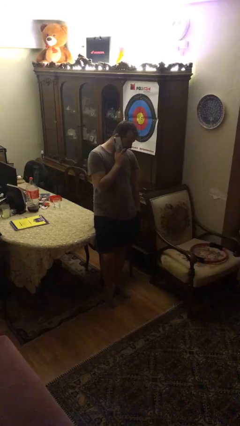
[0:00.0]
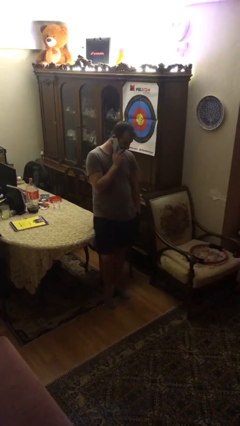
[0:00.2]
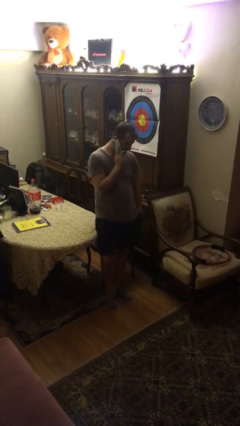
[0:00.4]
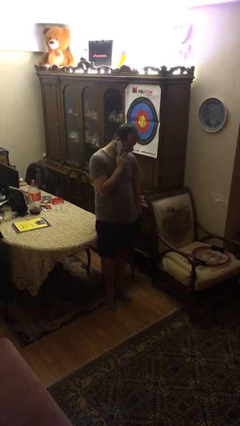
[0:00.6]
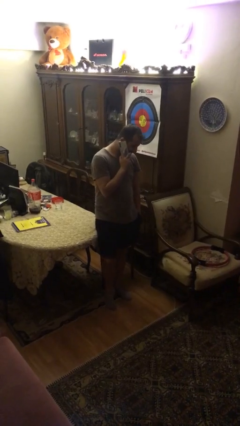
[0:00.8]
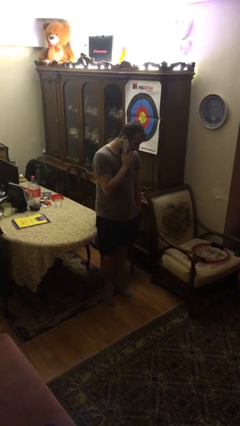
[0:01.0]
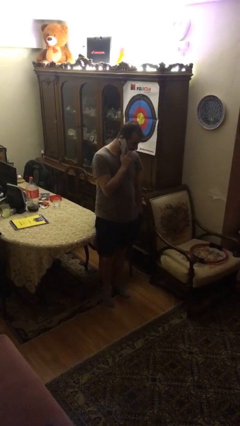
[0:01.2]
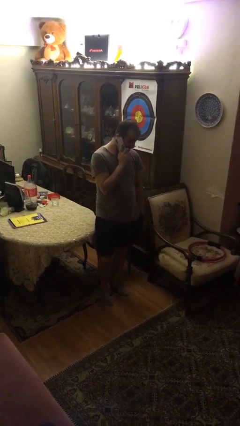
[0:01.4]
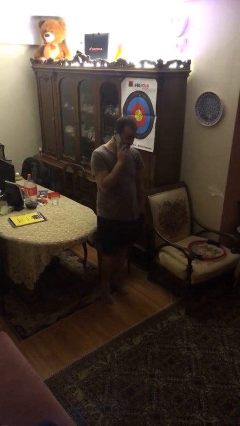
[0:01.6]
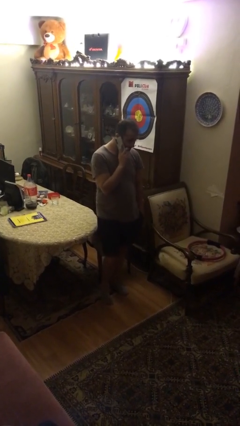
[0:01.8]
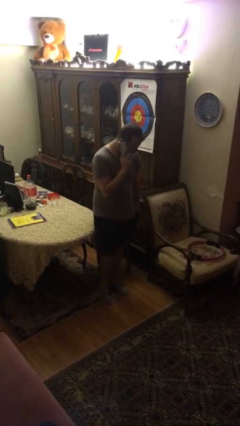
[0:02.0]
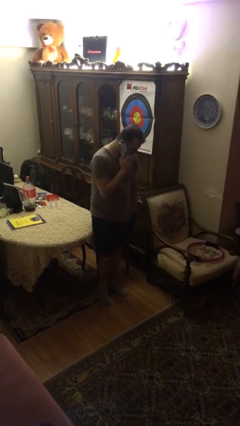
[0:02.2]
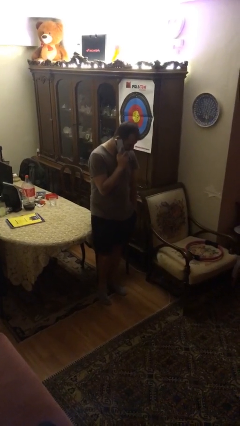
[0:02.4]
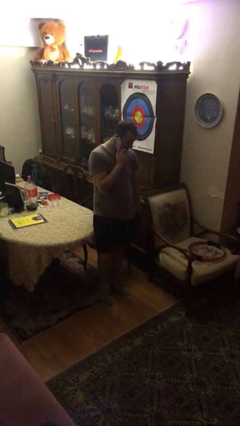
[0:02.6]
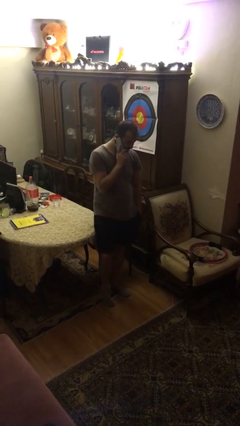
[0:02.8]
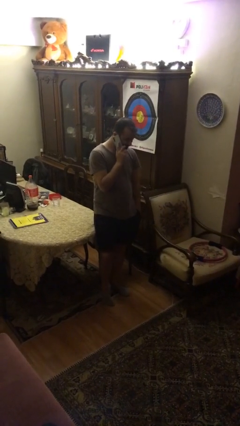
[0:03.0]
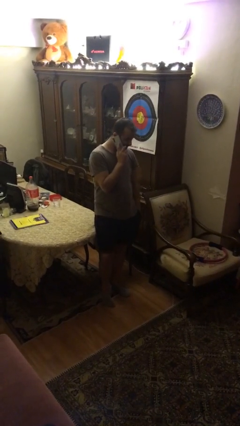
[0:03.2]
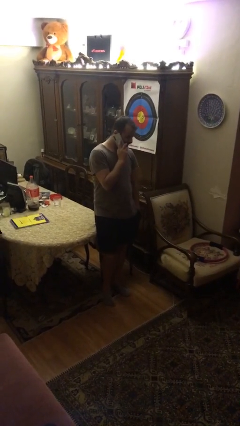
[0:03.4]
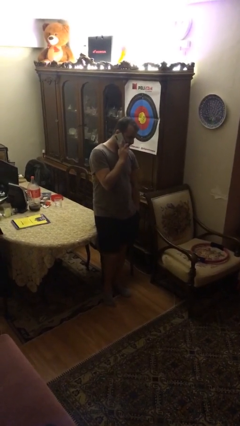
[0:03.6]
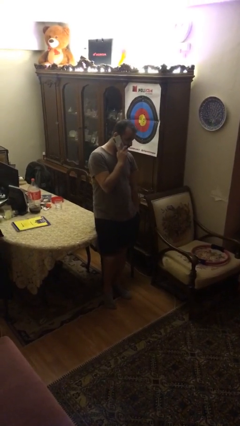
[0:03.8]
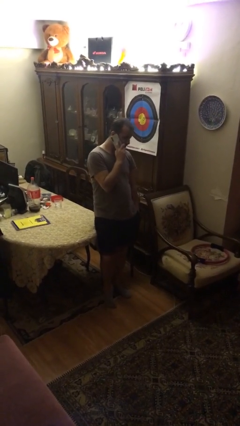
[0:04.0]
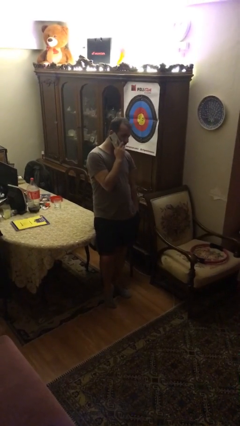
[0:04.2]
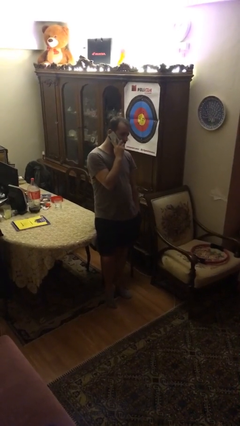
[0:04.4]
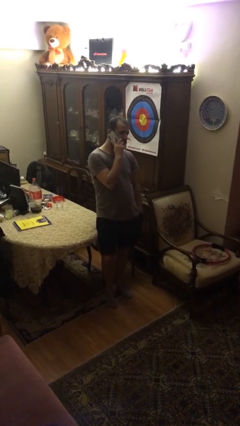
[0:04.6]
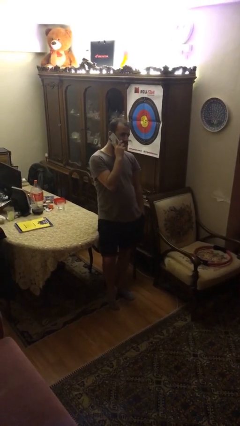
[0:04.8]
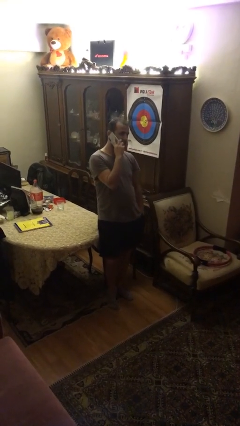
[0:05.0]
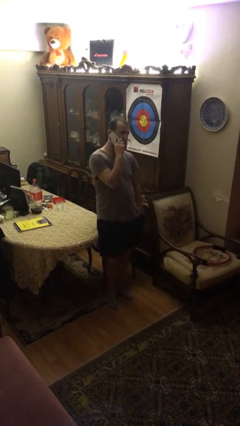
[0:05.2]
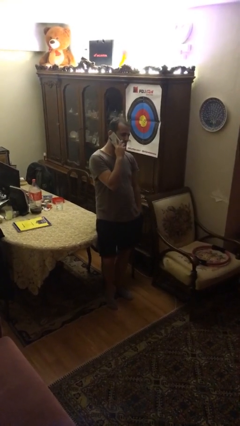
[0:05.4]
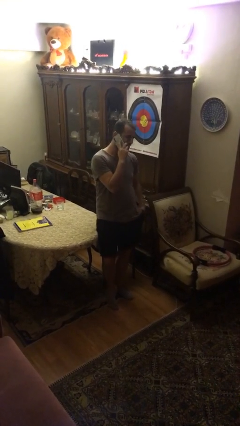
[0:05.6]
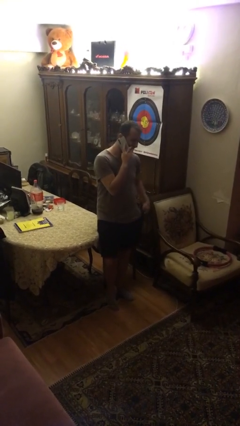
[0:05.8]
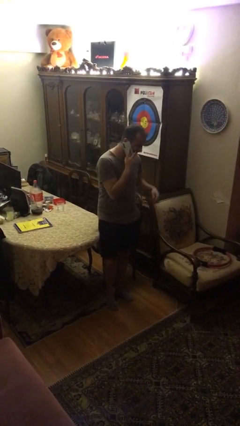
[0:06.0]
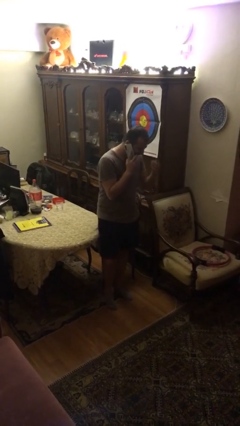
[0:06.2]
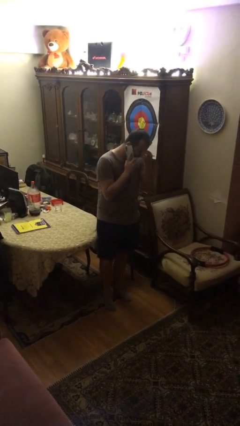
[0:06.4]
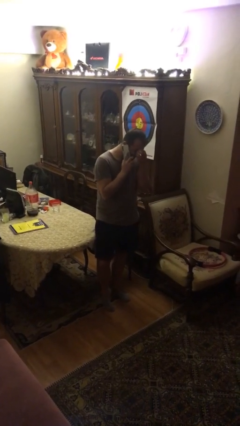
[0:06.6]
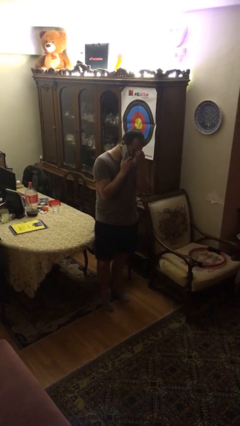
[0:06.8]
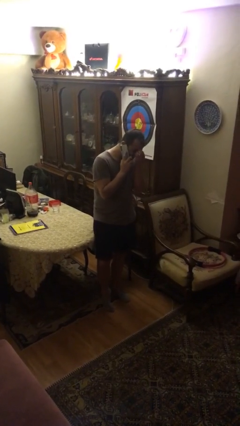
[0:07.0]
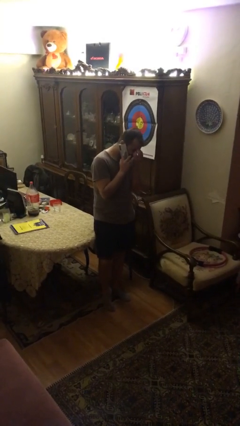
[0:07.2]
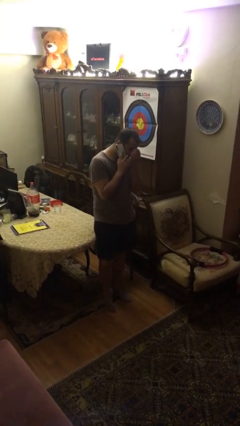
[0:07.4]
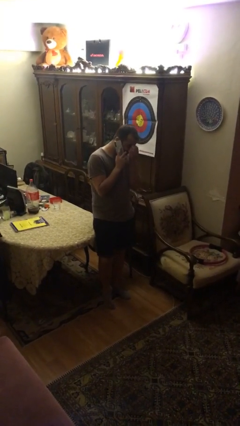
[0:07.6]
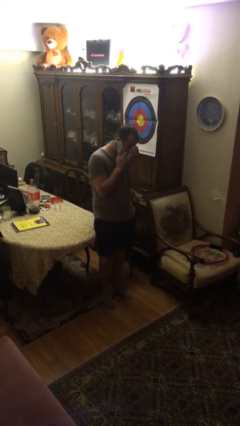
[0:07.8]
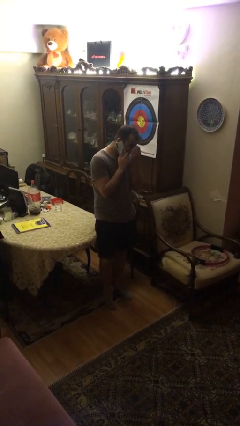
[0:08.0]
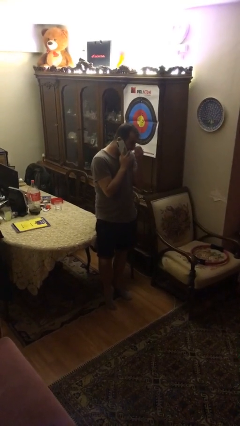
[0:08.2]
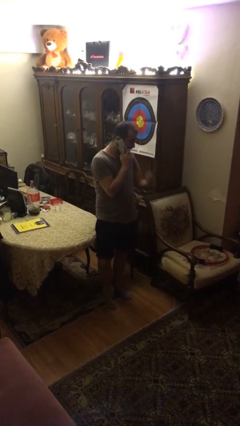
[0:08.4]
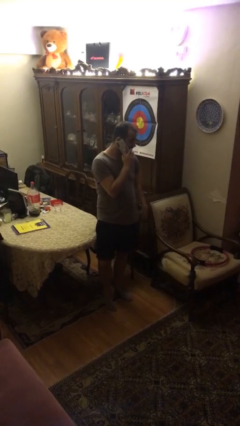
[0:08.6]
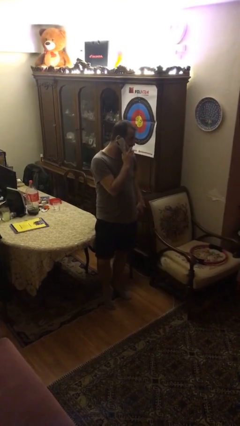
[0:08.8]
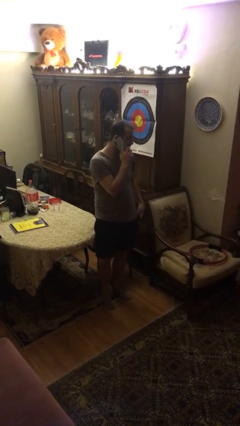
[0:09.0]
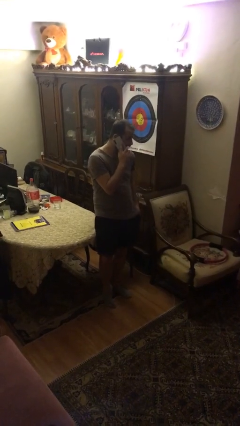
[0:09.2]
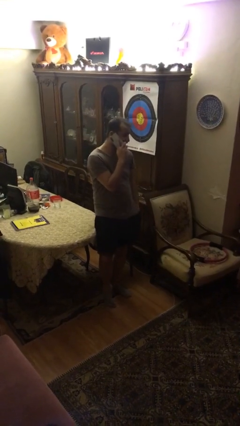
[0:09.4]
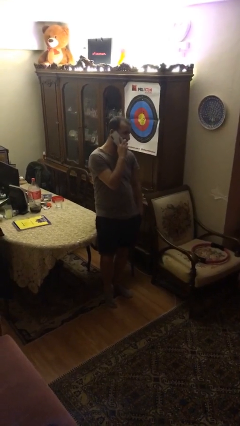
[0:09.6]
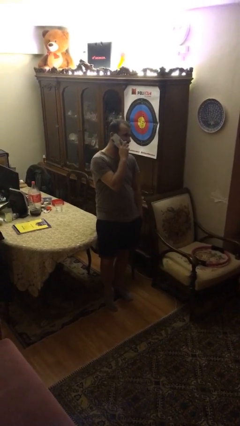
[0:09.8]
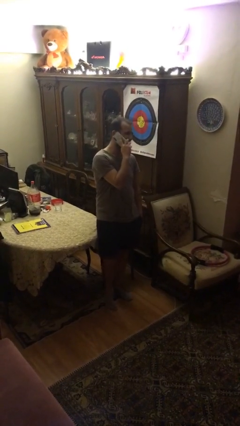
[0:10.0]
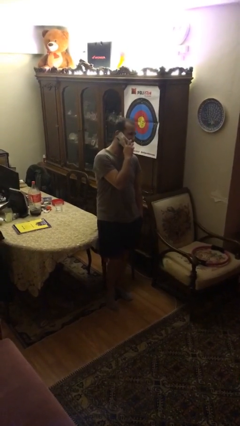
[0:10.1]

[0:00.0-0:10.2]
person talks on phone

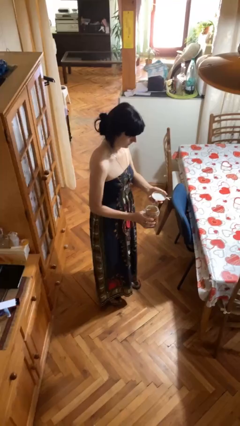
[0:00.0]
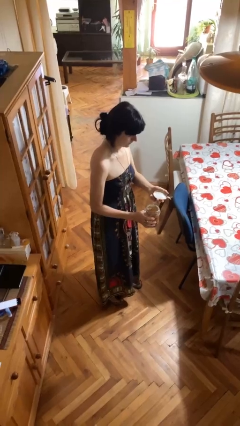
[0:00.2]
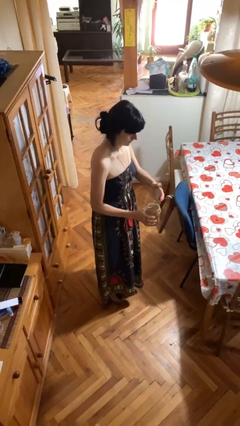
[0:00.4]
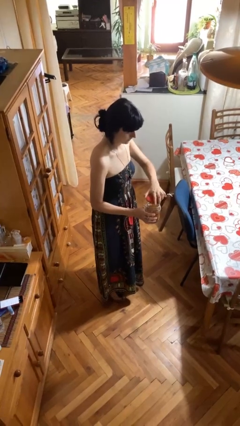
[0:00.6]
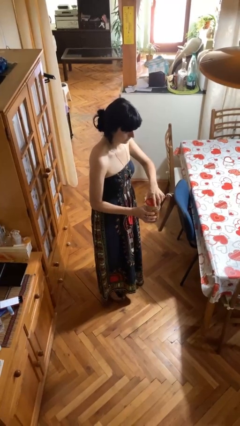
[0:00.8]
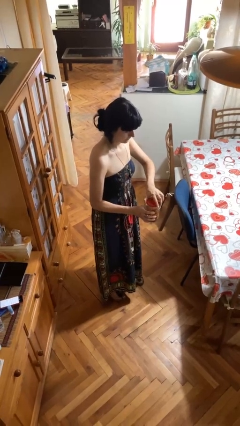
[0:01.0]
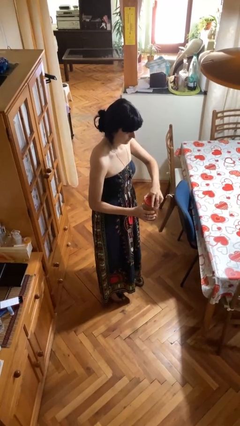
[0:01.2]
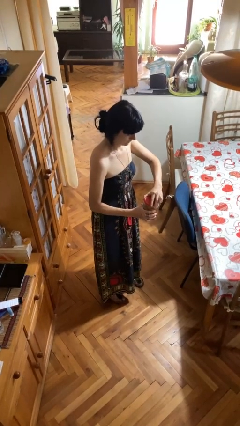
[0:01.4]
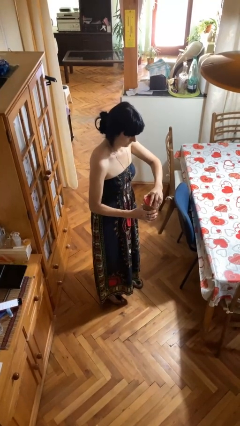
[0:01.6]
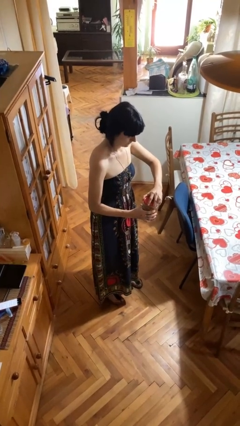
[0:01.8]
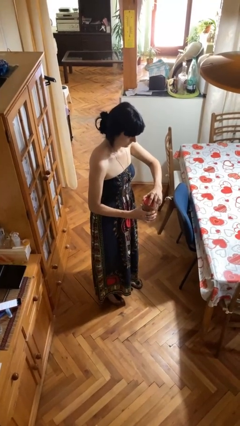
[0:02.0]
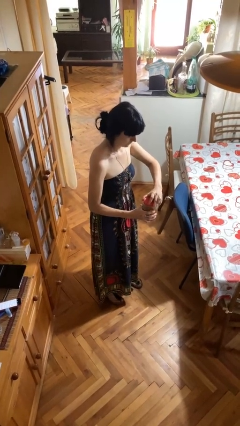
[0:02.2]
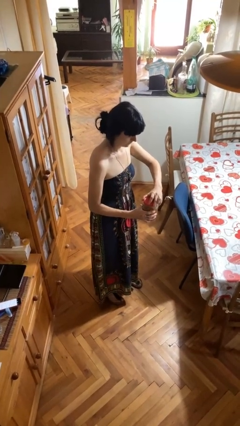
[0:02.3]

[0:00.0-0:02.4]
person closes jar

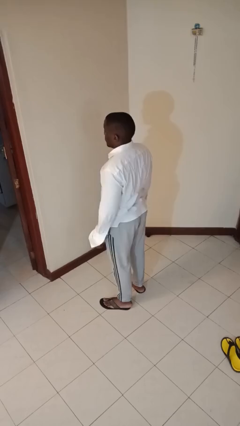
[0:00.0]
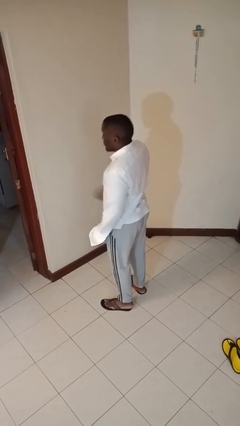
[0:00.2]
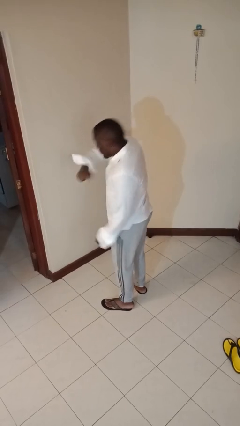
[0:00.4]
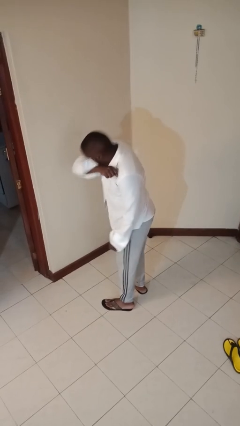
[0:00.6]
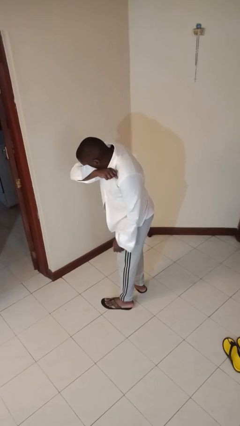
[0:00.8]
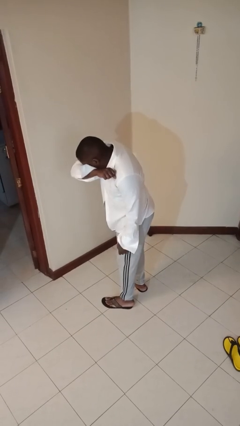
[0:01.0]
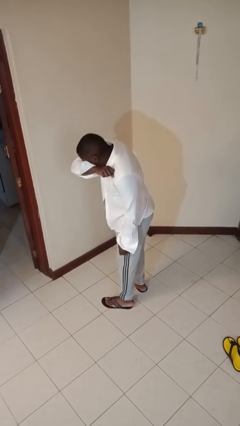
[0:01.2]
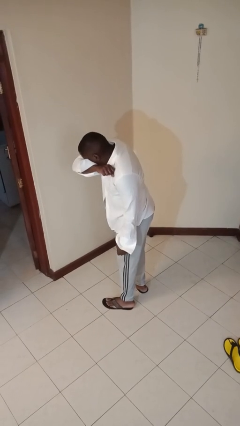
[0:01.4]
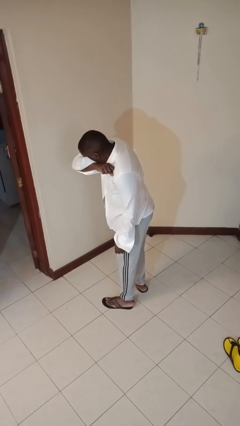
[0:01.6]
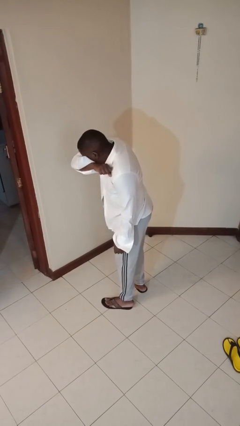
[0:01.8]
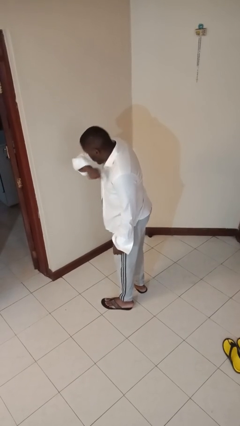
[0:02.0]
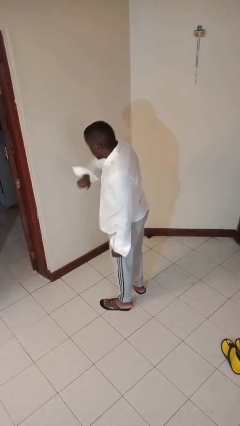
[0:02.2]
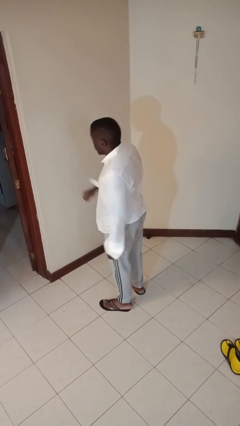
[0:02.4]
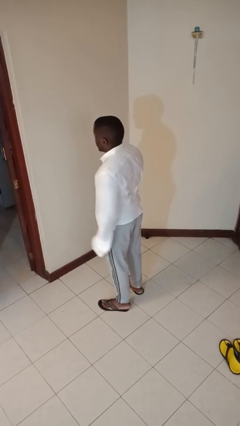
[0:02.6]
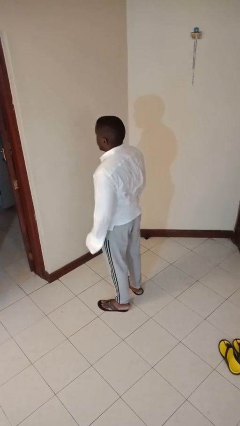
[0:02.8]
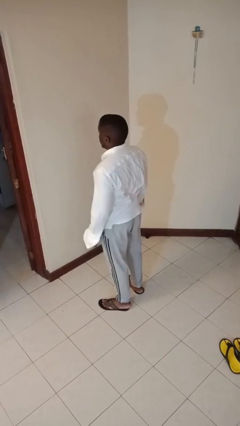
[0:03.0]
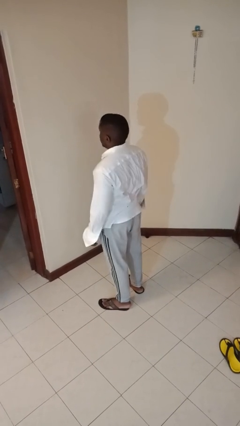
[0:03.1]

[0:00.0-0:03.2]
person sneezes into arm

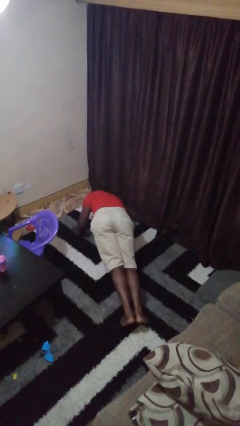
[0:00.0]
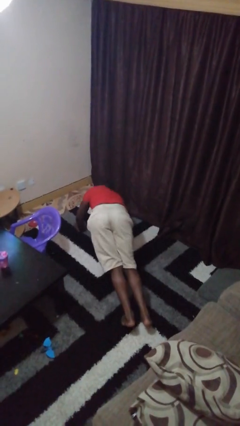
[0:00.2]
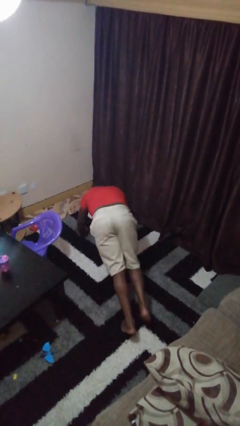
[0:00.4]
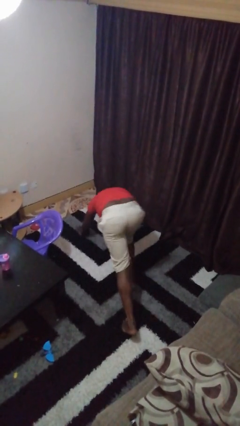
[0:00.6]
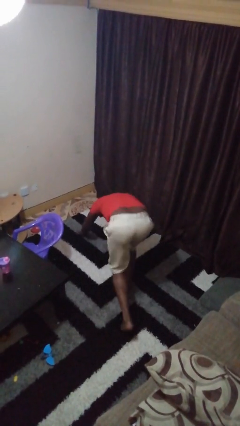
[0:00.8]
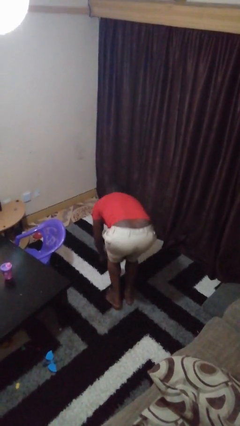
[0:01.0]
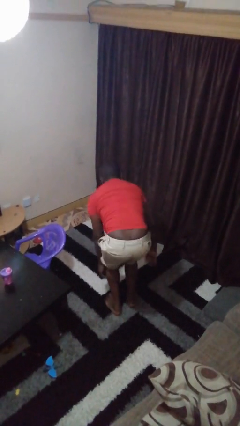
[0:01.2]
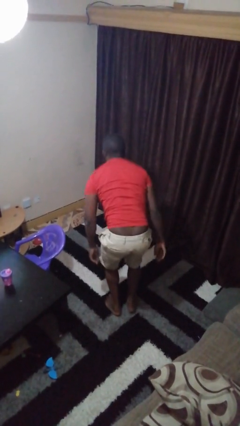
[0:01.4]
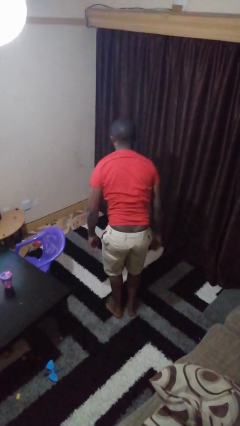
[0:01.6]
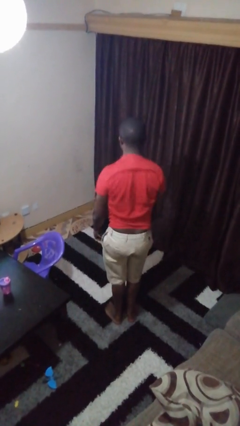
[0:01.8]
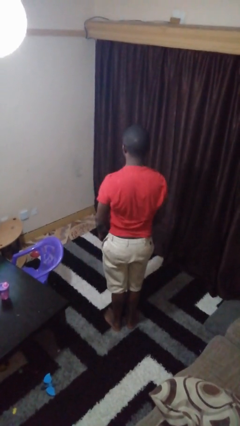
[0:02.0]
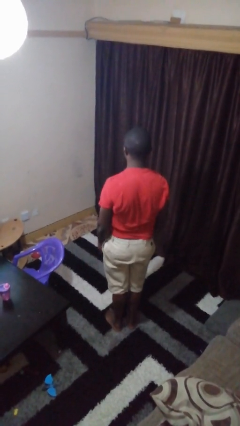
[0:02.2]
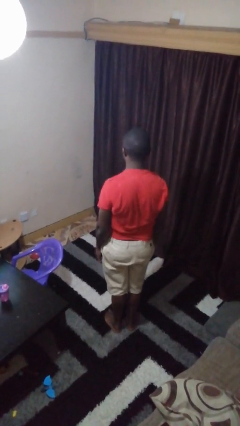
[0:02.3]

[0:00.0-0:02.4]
person stands up from floor
